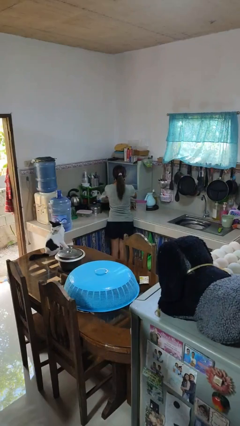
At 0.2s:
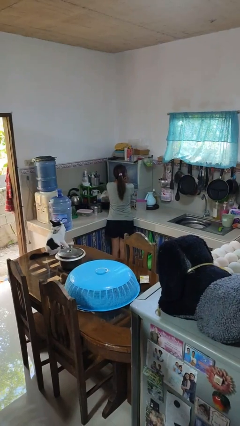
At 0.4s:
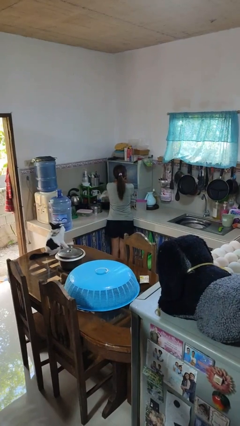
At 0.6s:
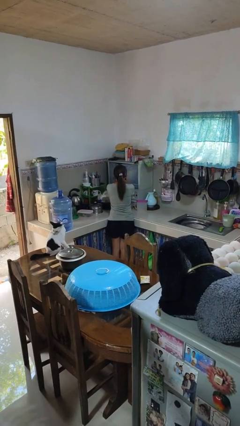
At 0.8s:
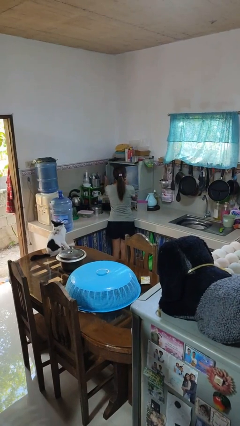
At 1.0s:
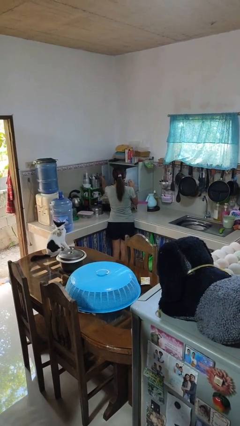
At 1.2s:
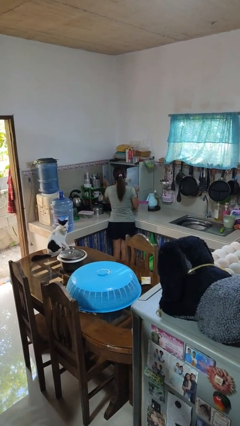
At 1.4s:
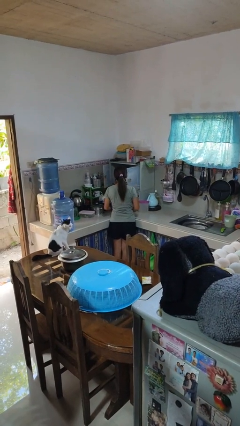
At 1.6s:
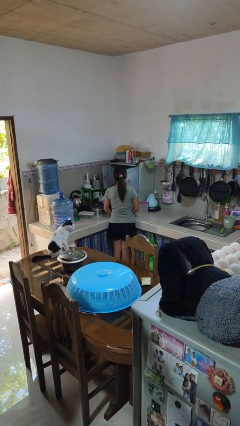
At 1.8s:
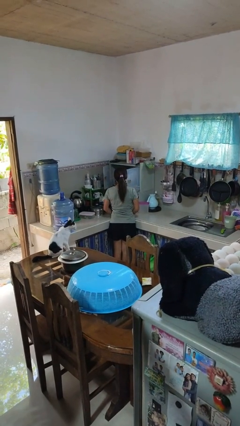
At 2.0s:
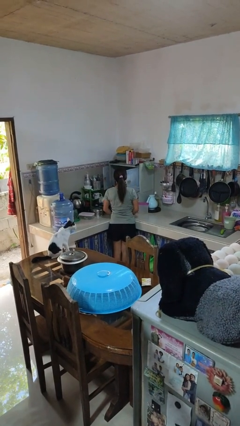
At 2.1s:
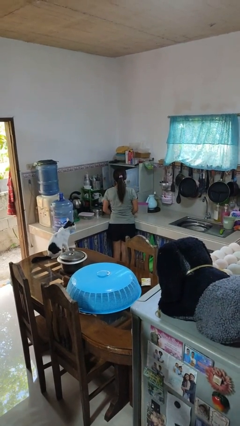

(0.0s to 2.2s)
person opens kitchen drawer

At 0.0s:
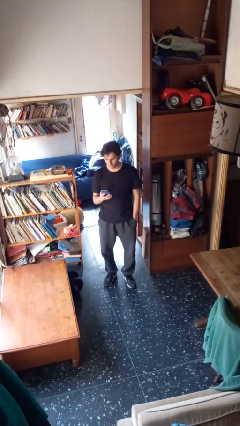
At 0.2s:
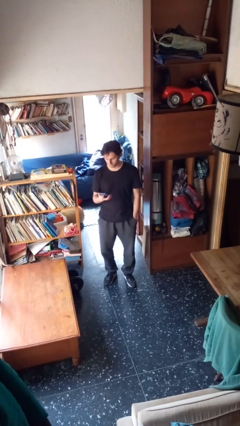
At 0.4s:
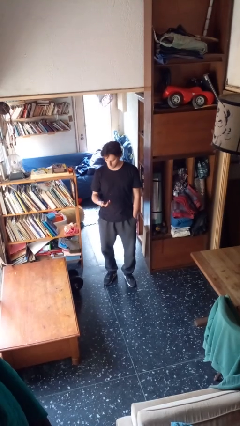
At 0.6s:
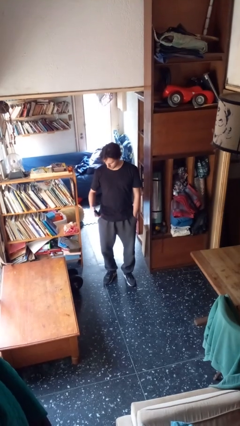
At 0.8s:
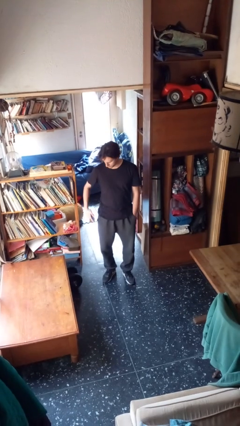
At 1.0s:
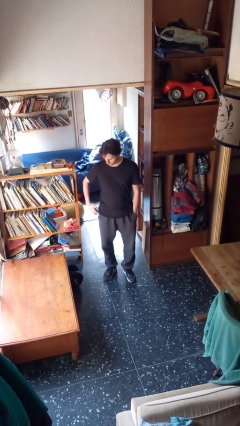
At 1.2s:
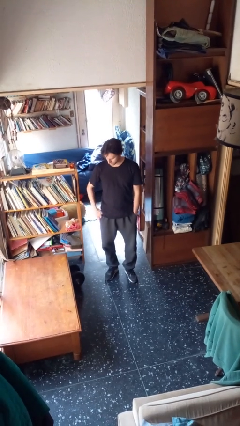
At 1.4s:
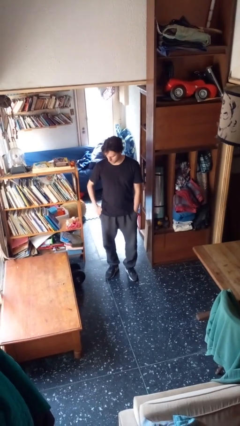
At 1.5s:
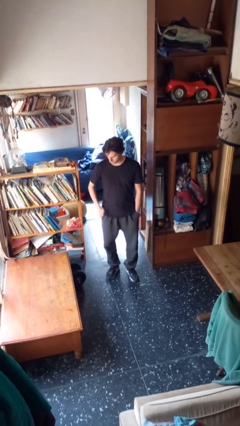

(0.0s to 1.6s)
person puts phone into pocket

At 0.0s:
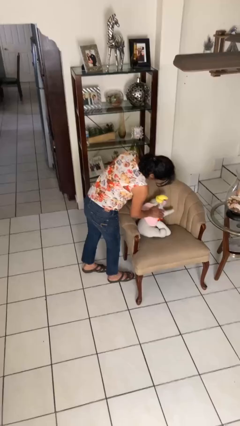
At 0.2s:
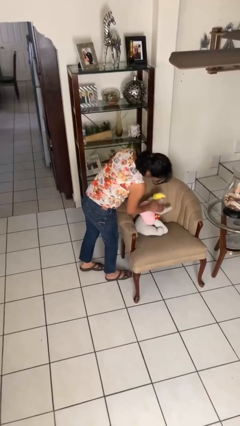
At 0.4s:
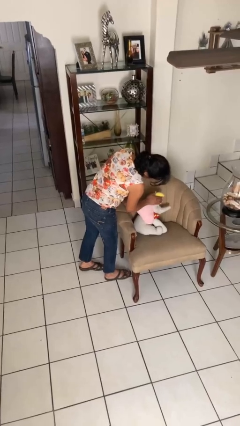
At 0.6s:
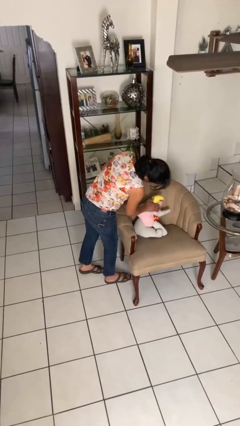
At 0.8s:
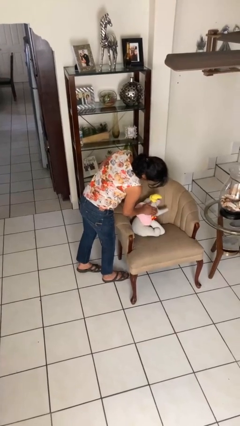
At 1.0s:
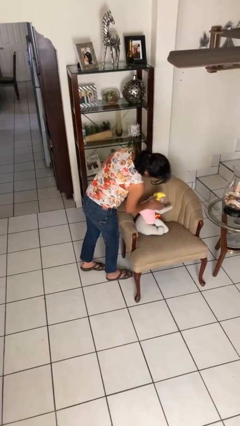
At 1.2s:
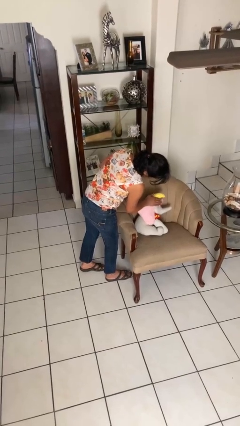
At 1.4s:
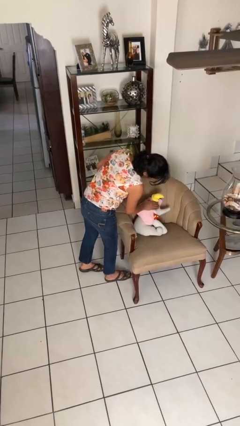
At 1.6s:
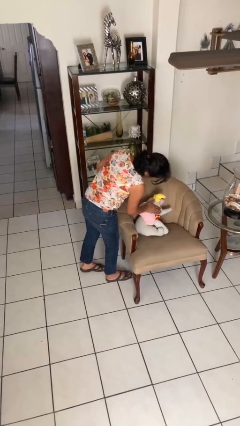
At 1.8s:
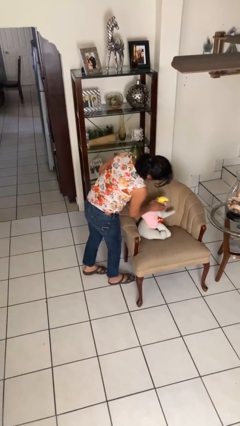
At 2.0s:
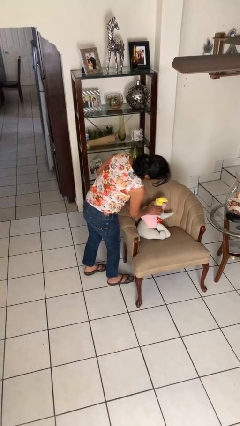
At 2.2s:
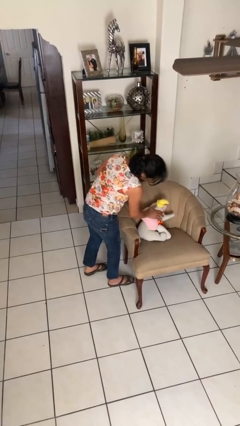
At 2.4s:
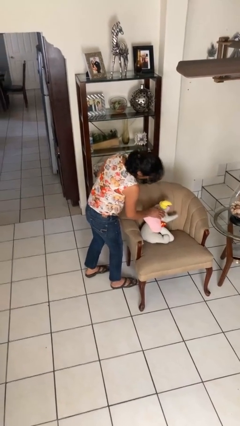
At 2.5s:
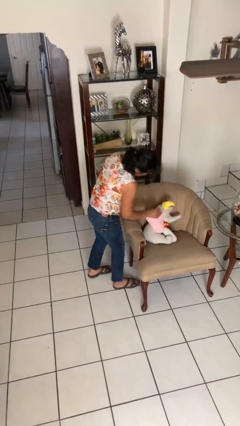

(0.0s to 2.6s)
person waves hand over object

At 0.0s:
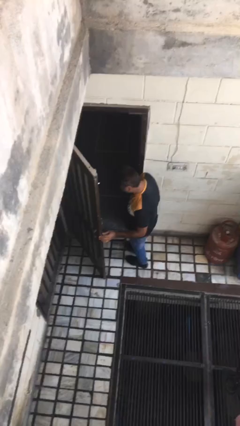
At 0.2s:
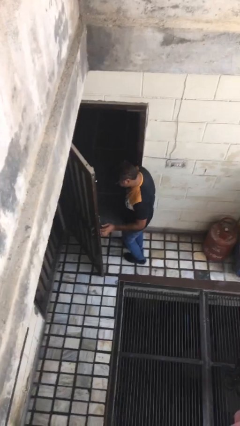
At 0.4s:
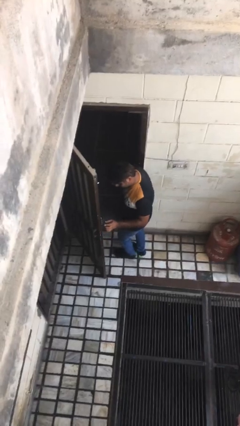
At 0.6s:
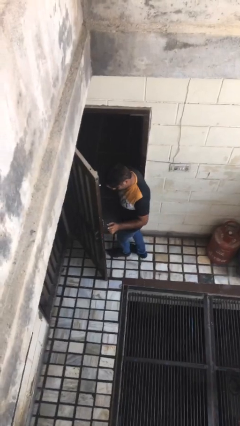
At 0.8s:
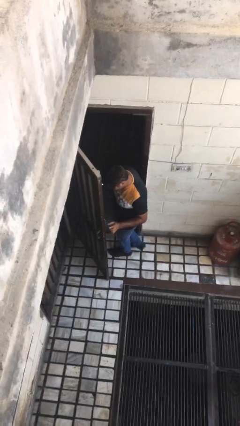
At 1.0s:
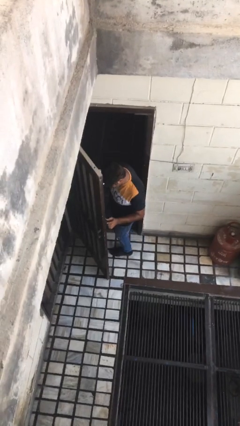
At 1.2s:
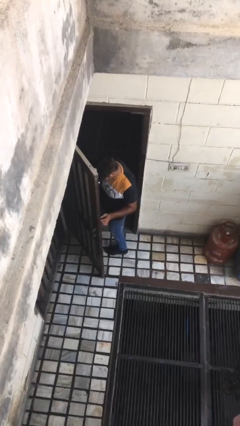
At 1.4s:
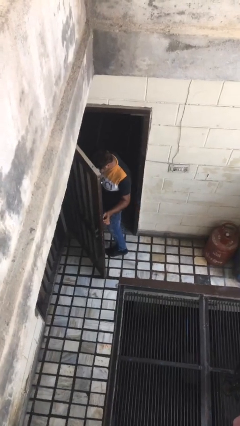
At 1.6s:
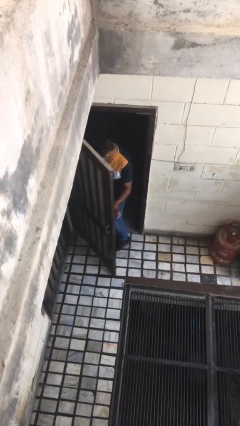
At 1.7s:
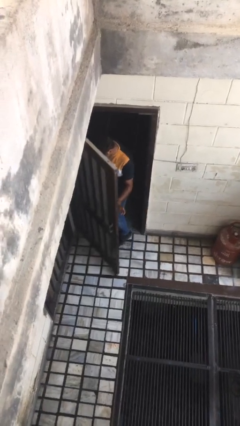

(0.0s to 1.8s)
person exits scene through structure

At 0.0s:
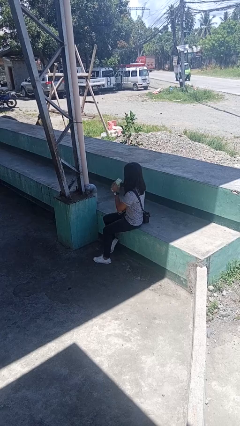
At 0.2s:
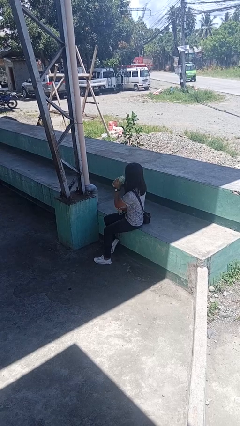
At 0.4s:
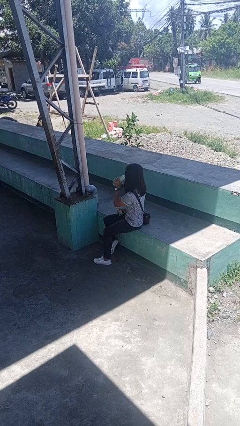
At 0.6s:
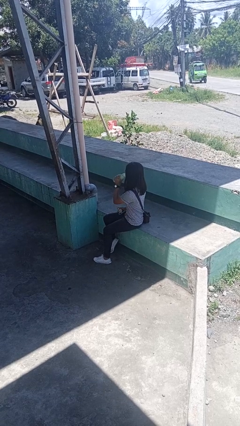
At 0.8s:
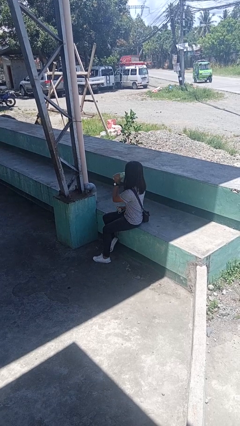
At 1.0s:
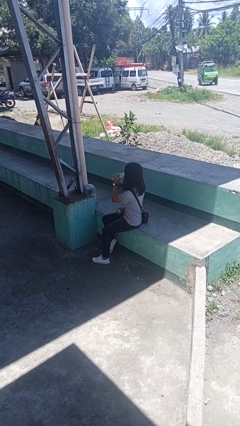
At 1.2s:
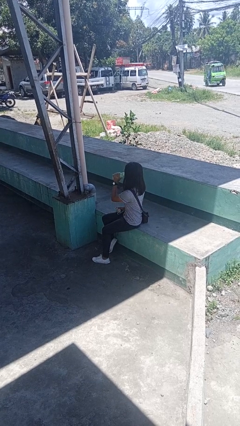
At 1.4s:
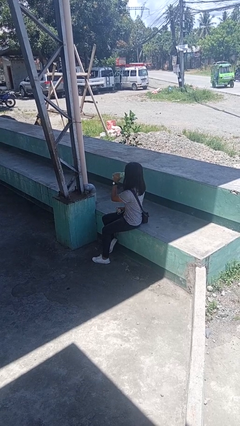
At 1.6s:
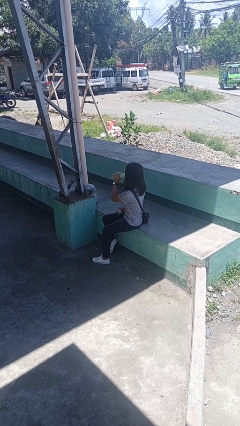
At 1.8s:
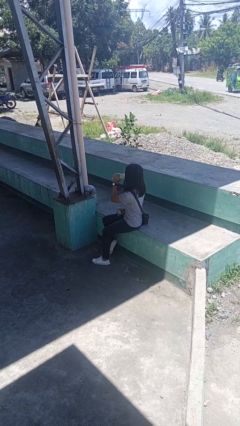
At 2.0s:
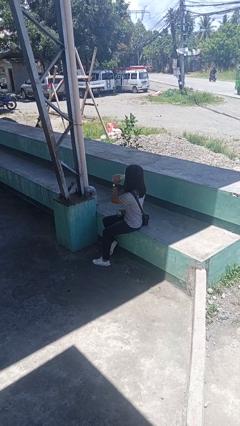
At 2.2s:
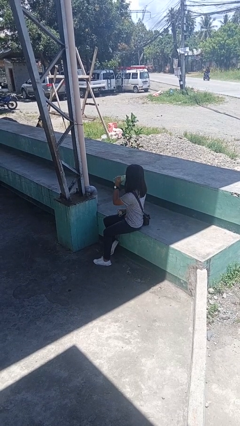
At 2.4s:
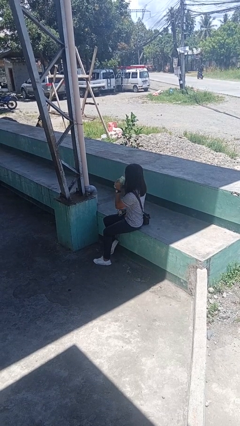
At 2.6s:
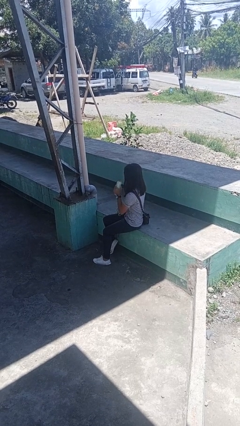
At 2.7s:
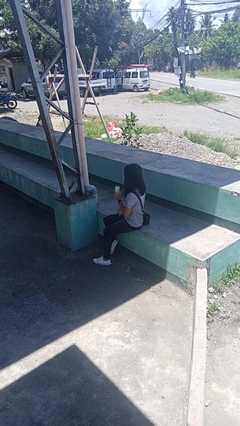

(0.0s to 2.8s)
person drinks from bottle

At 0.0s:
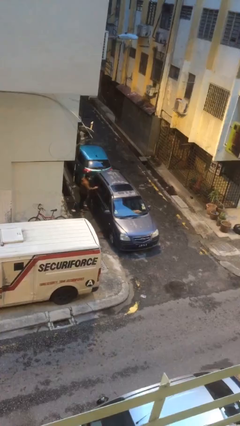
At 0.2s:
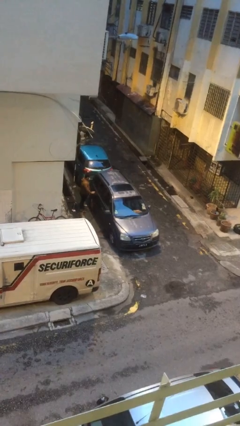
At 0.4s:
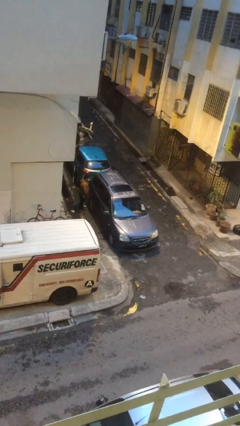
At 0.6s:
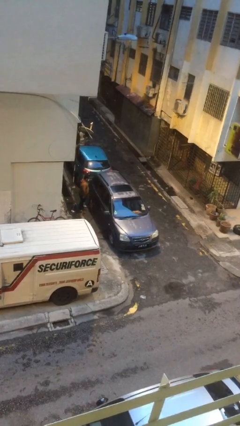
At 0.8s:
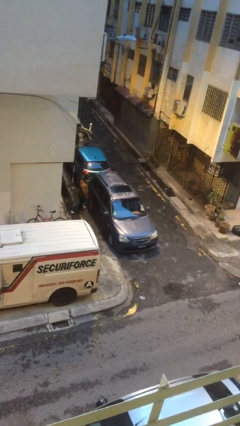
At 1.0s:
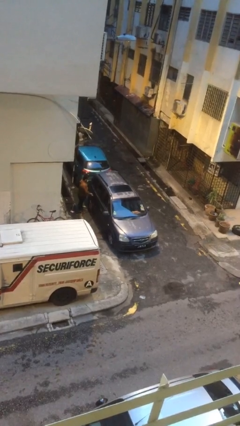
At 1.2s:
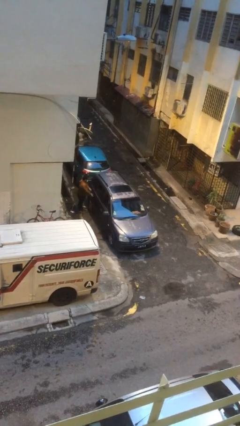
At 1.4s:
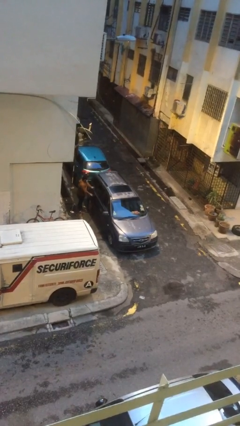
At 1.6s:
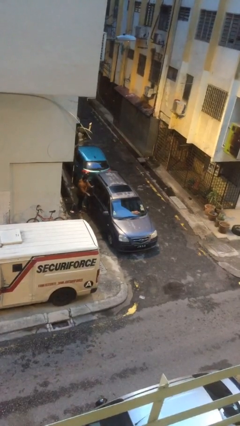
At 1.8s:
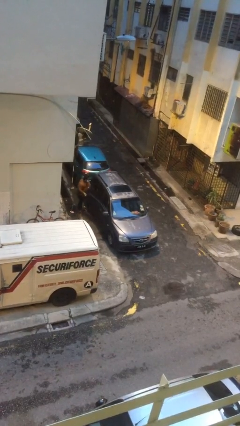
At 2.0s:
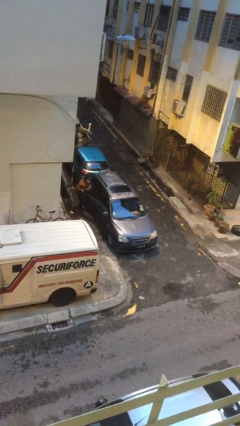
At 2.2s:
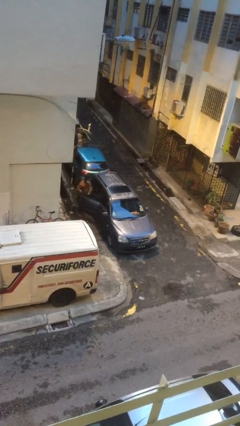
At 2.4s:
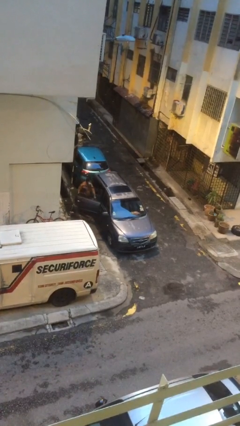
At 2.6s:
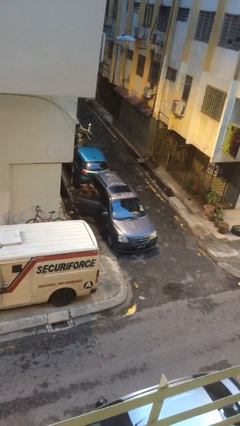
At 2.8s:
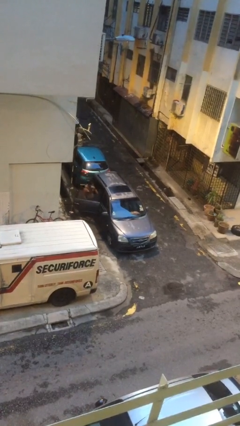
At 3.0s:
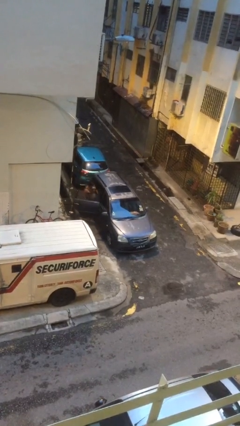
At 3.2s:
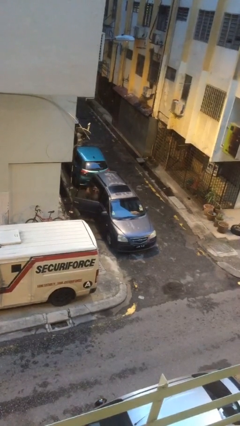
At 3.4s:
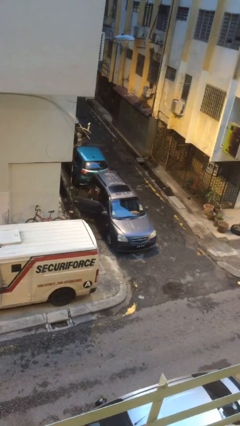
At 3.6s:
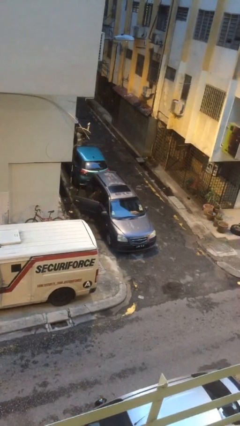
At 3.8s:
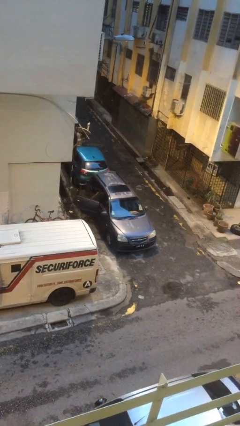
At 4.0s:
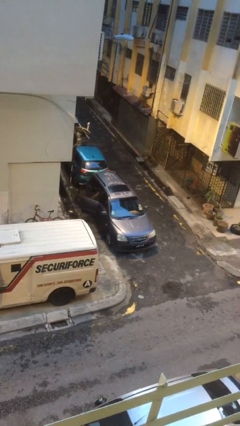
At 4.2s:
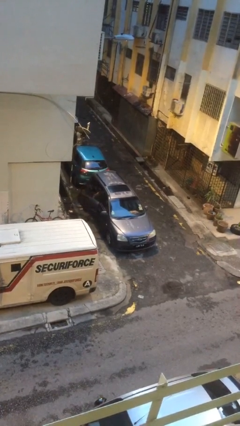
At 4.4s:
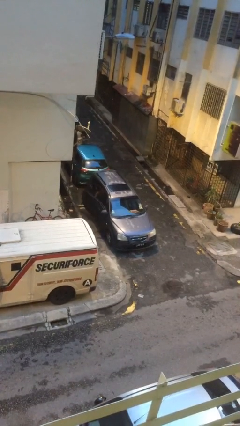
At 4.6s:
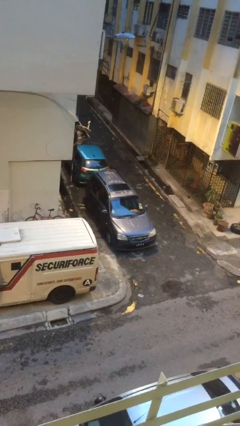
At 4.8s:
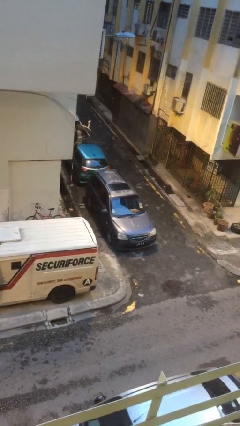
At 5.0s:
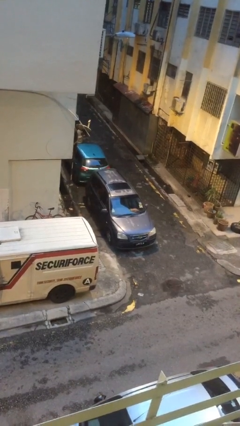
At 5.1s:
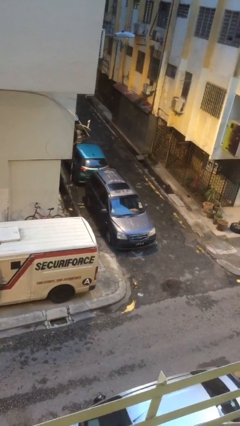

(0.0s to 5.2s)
car picks up person

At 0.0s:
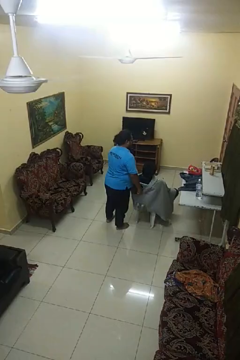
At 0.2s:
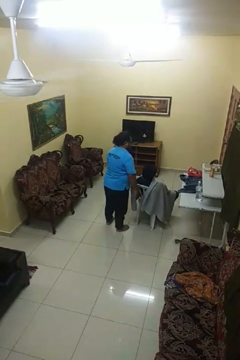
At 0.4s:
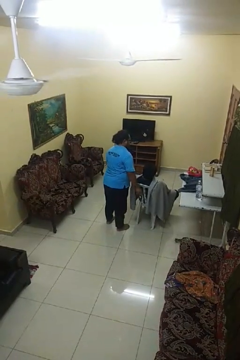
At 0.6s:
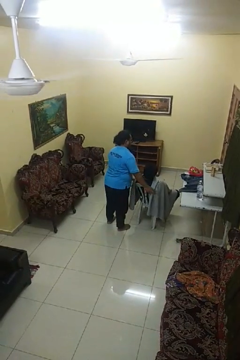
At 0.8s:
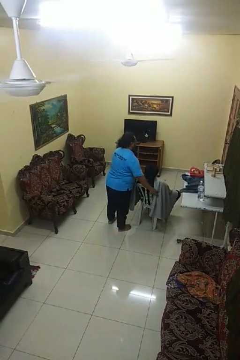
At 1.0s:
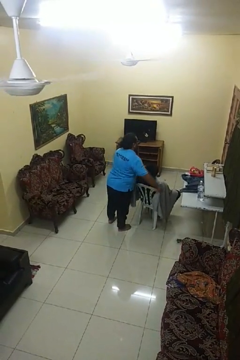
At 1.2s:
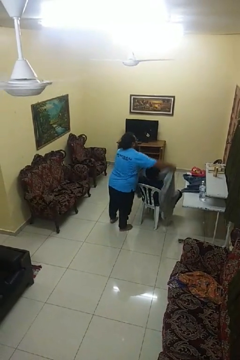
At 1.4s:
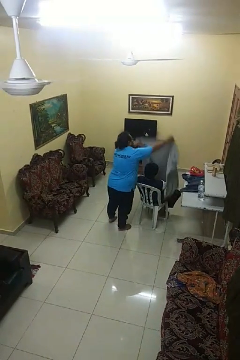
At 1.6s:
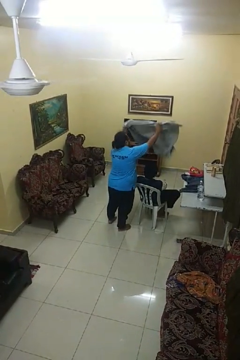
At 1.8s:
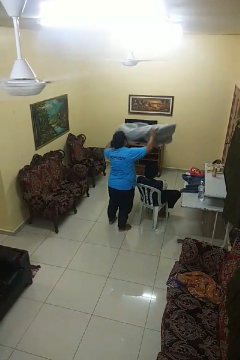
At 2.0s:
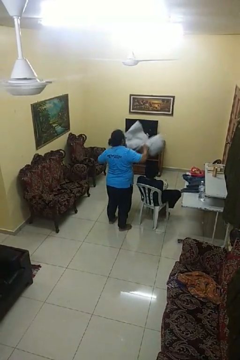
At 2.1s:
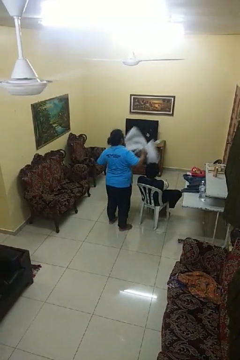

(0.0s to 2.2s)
person uncovers friend with blanket
